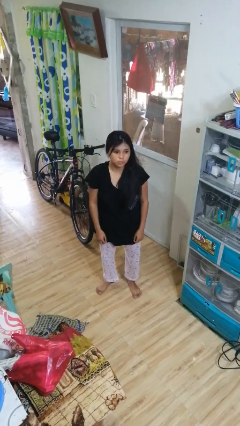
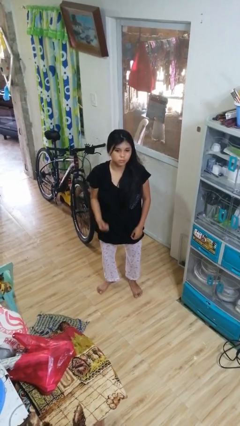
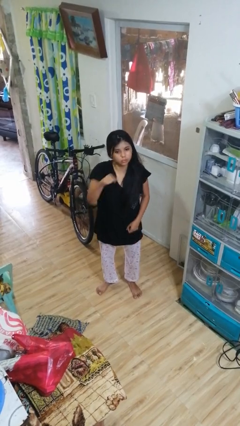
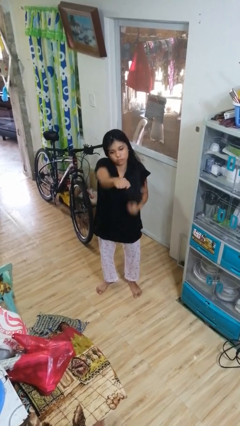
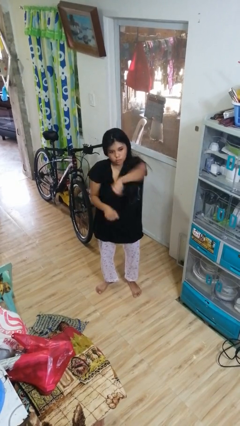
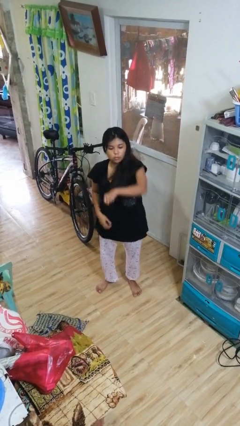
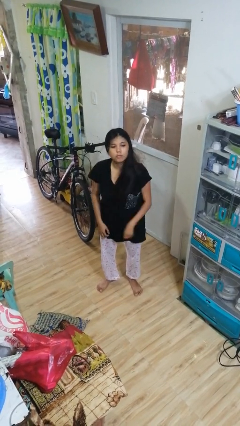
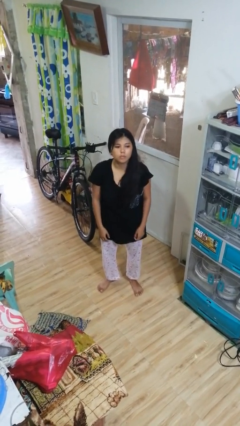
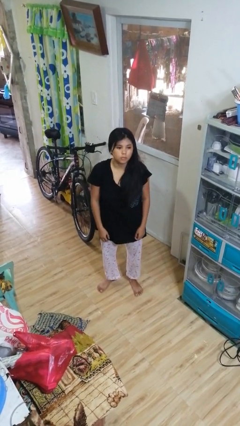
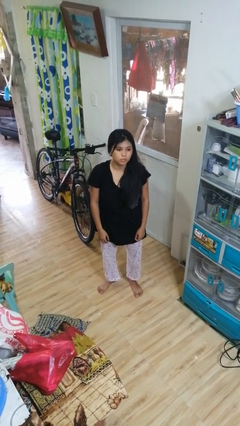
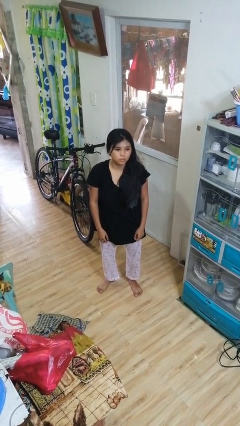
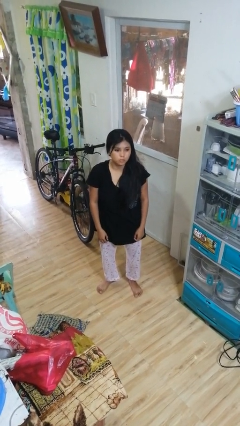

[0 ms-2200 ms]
person punches

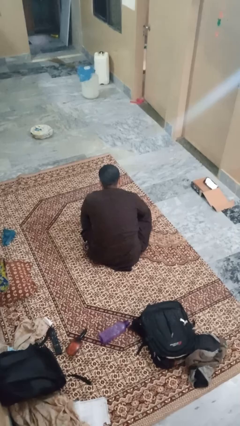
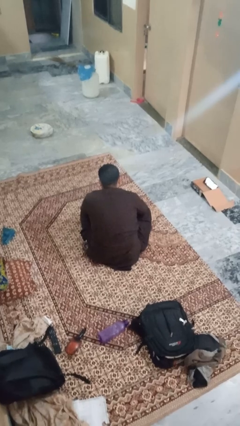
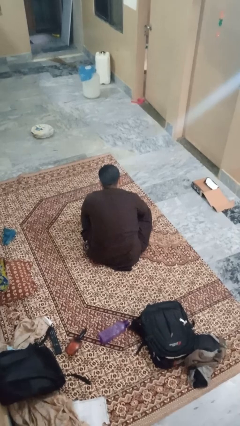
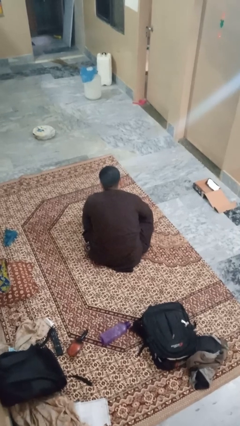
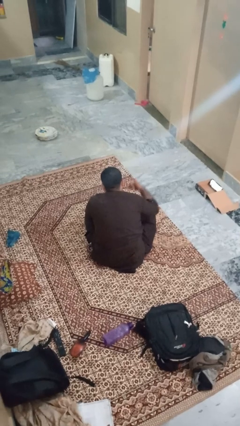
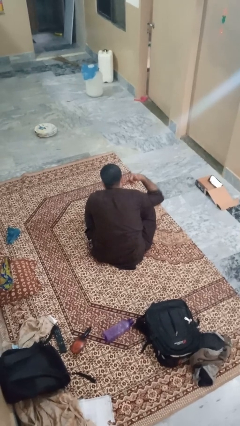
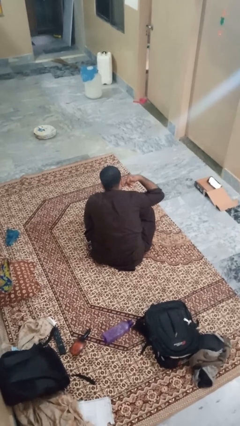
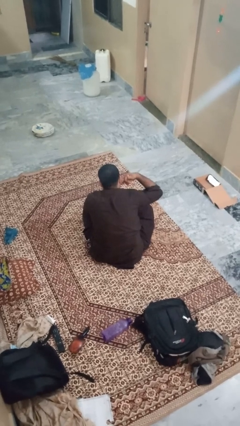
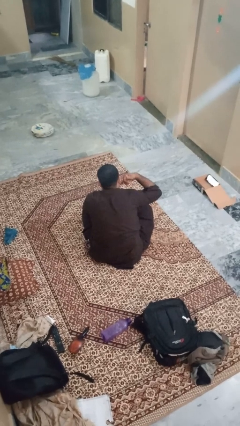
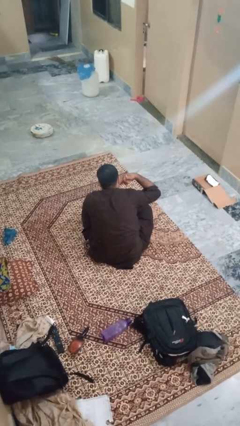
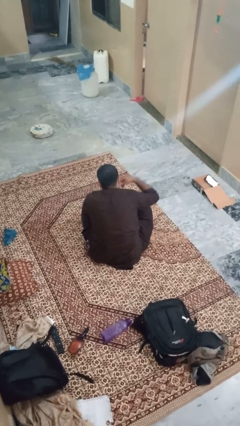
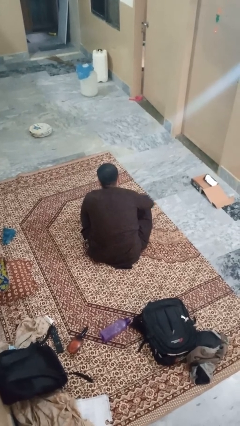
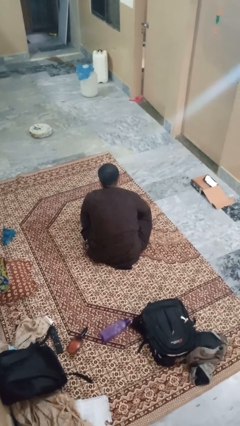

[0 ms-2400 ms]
person gestures call me

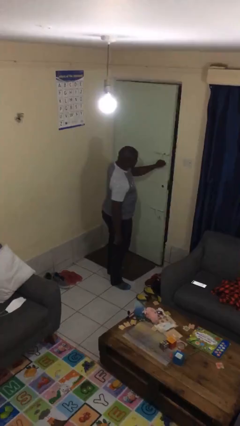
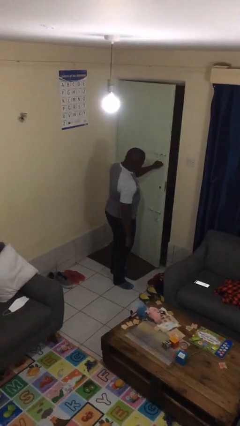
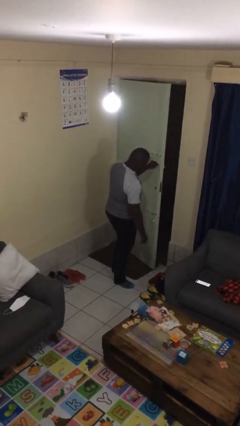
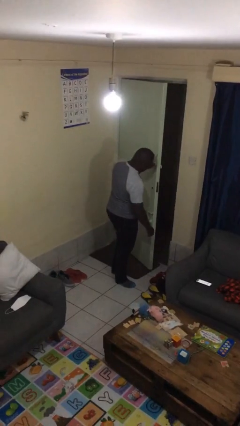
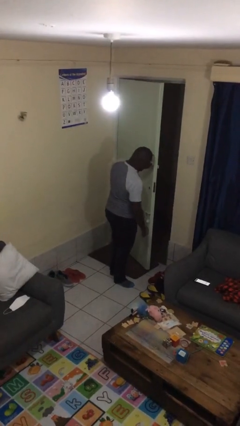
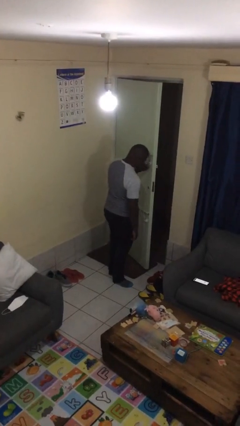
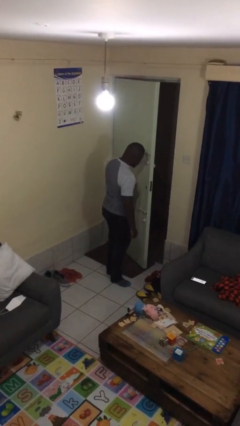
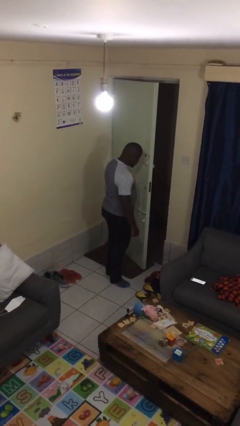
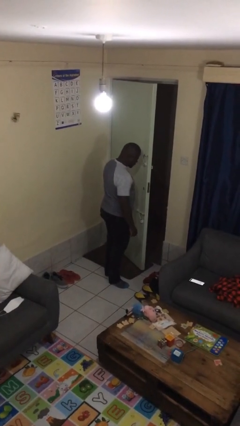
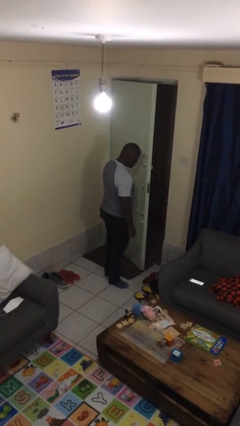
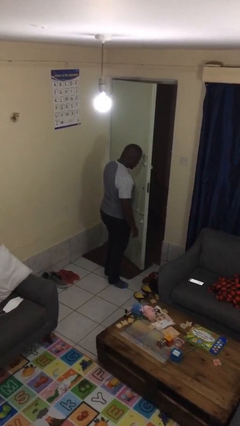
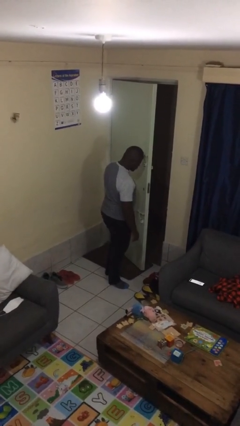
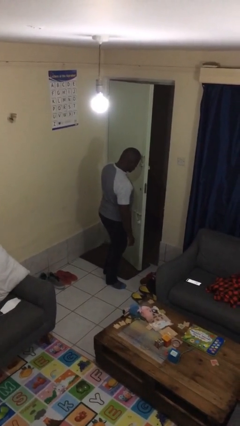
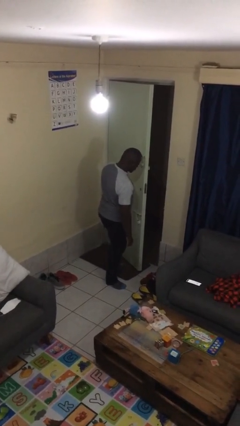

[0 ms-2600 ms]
person opens facility door

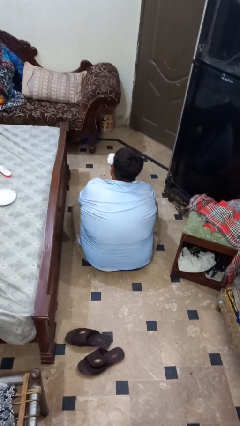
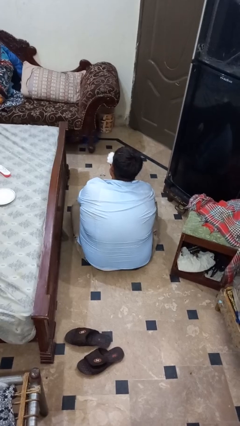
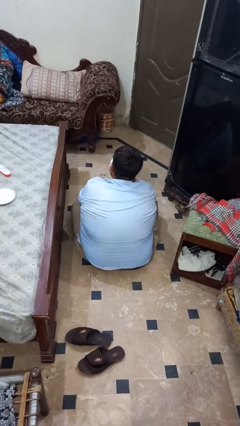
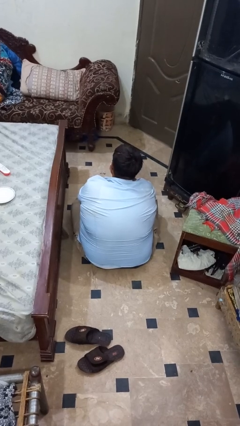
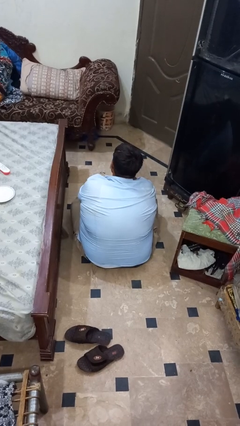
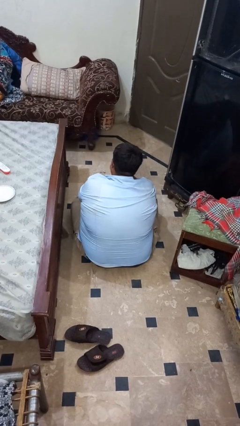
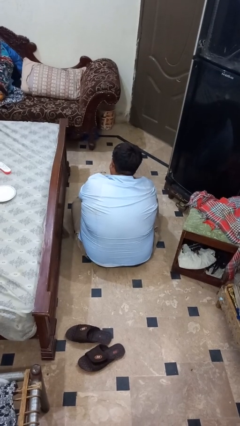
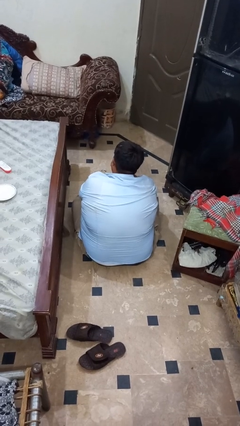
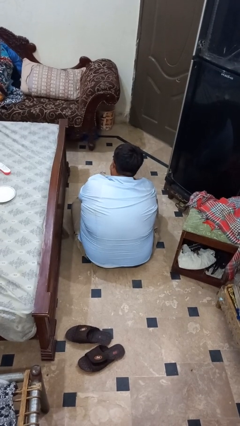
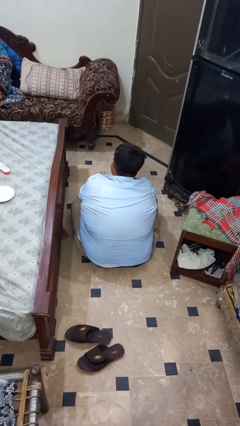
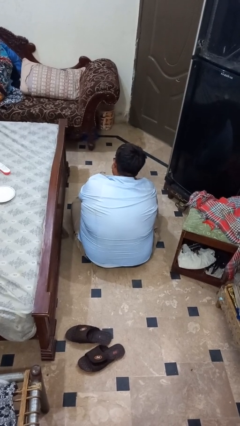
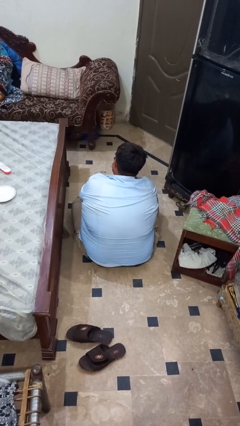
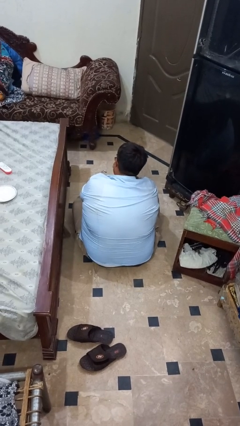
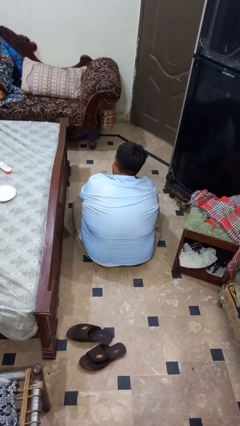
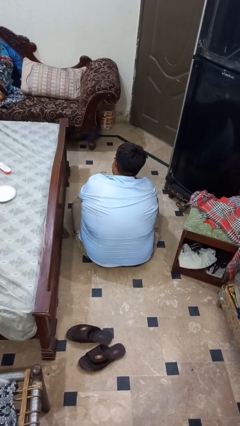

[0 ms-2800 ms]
person blows nose

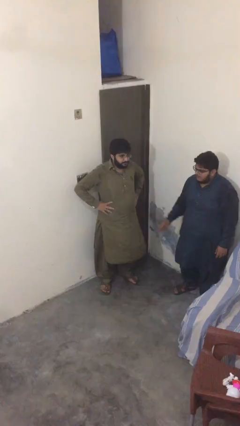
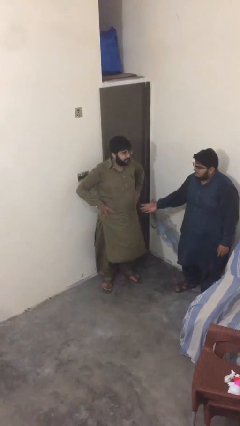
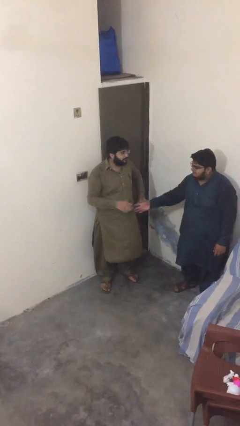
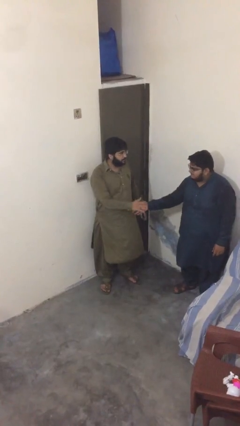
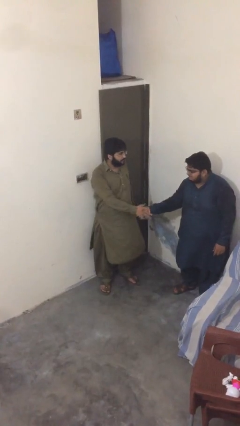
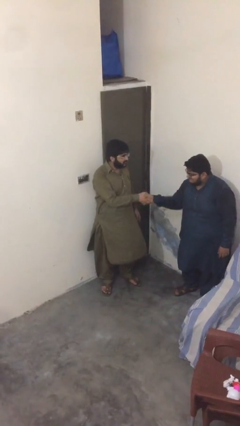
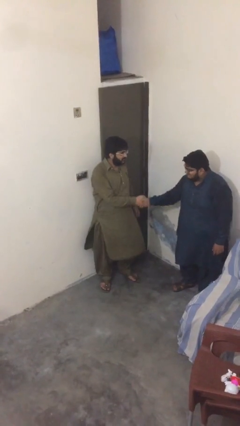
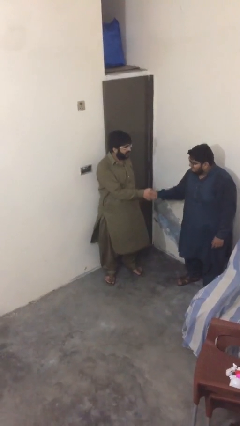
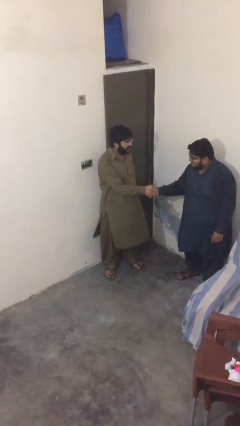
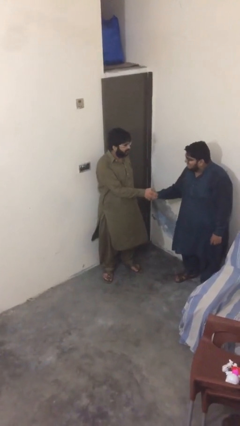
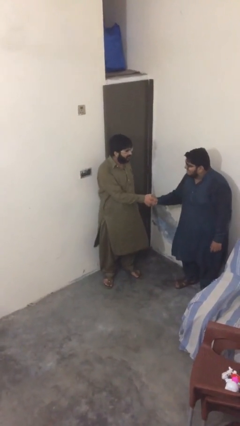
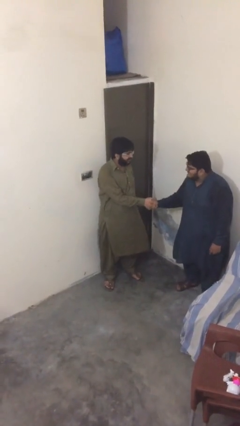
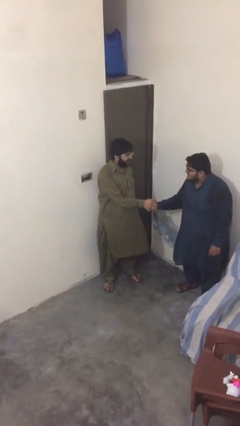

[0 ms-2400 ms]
person shakes hand

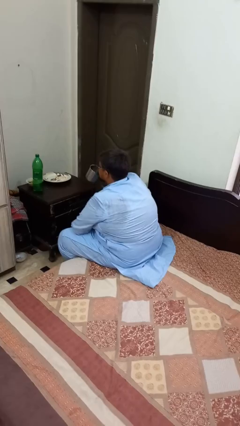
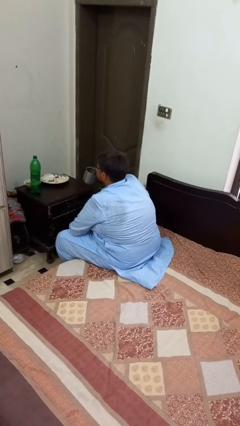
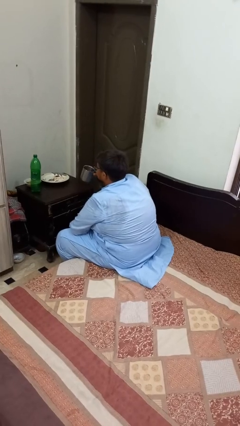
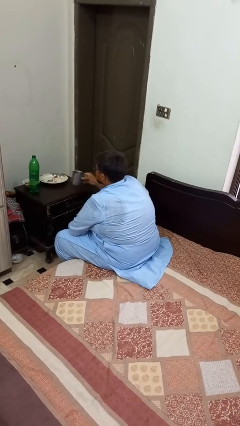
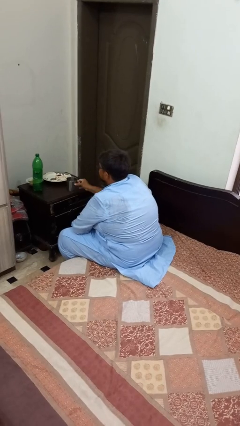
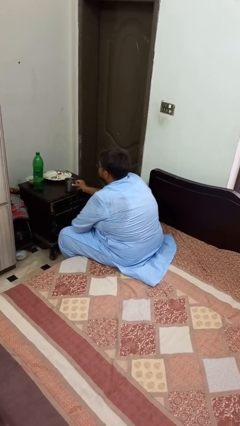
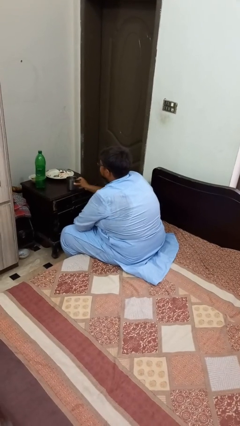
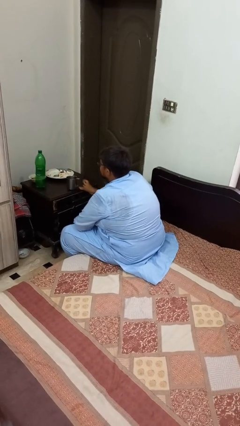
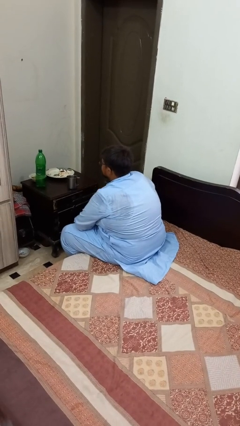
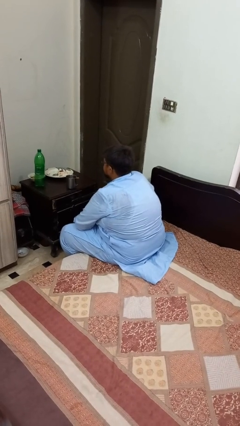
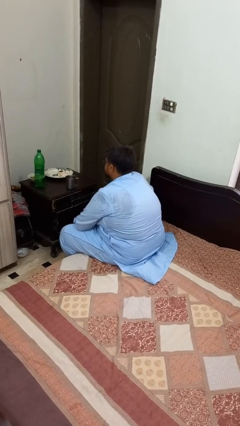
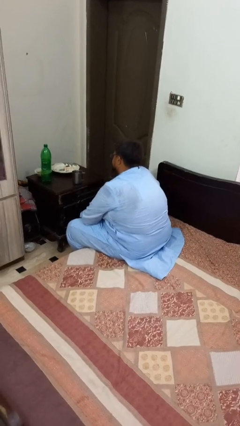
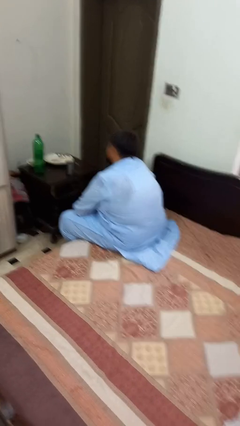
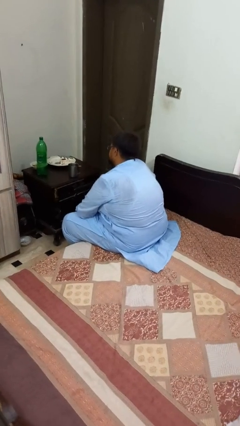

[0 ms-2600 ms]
person puts down object on table

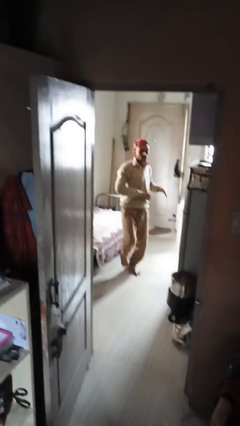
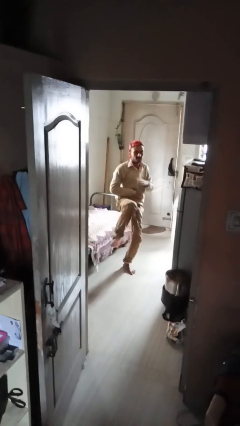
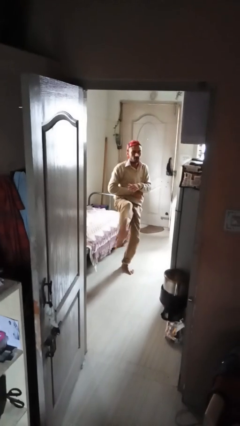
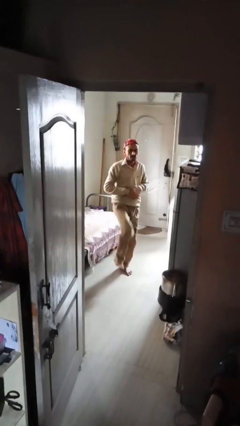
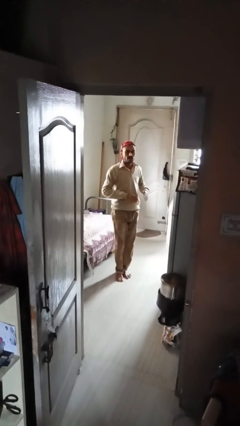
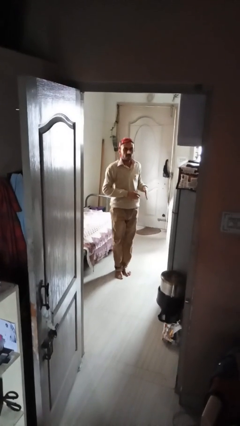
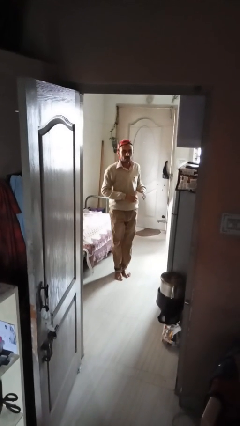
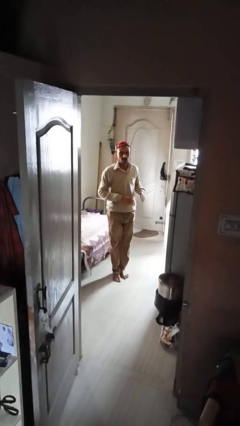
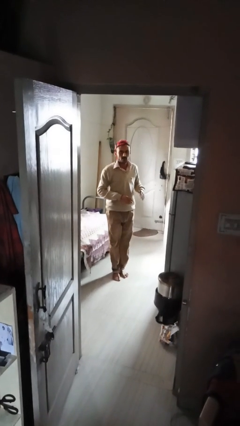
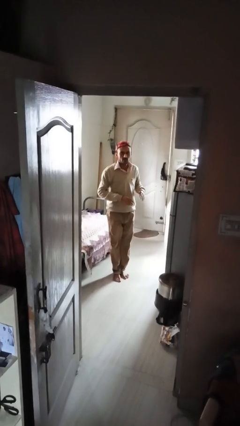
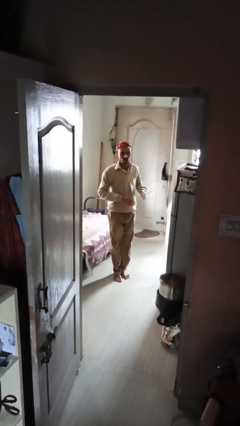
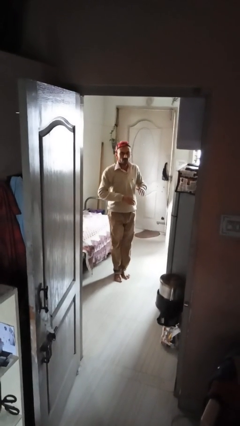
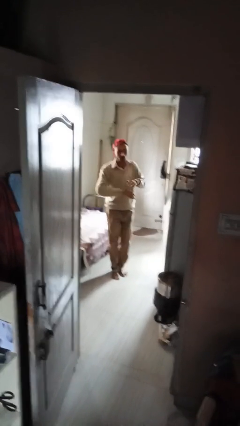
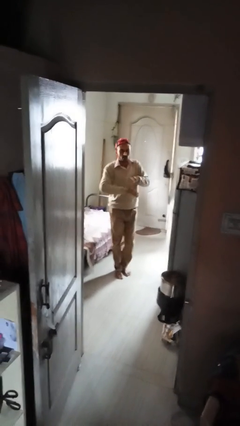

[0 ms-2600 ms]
person karate kicks
